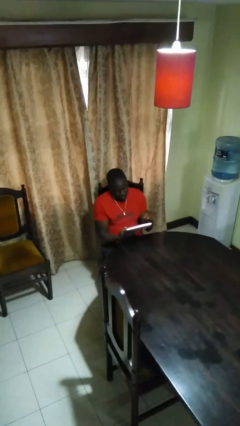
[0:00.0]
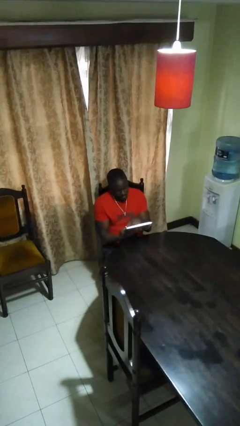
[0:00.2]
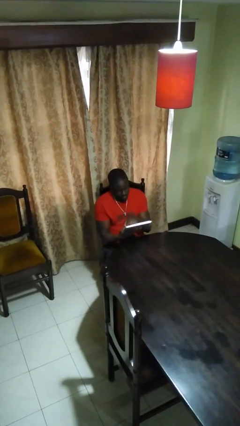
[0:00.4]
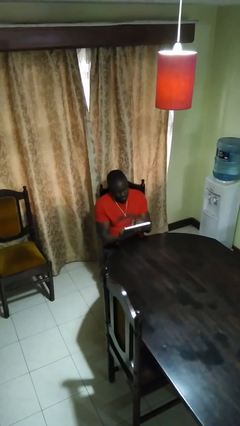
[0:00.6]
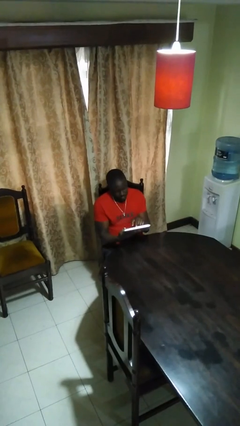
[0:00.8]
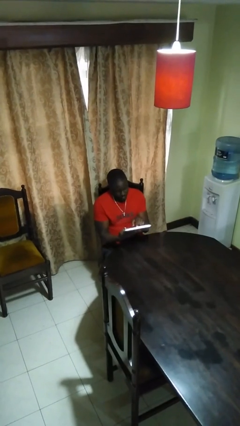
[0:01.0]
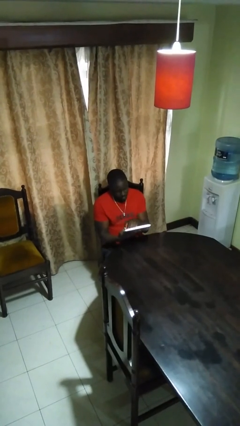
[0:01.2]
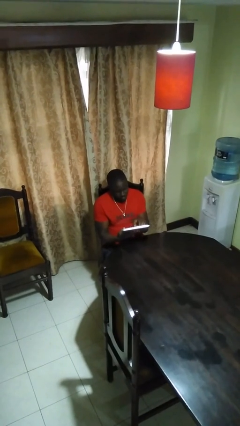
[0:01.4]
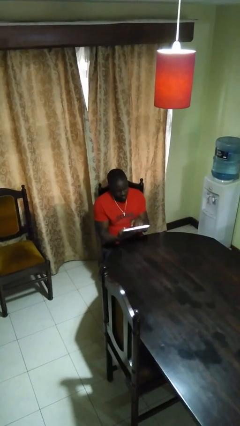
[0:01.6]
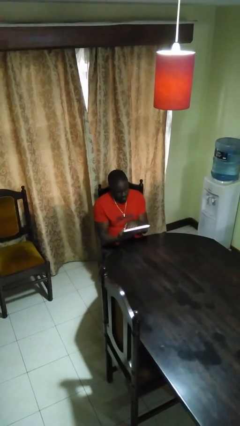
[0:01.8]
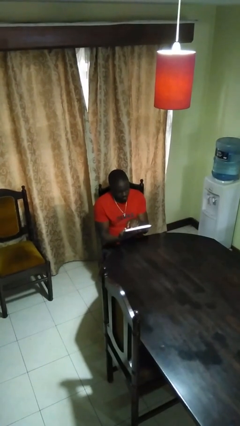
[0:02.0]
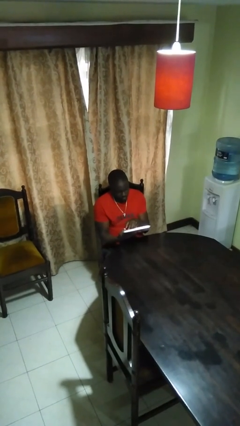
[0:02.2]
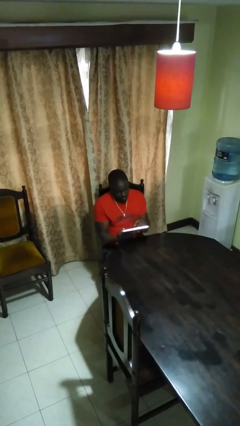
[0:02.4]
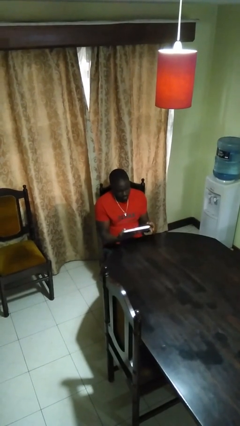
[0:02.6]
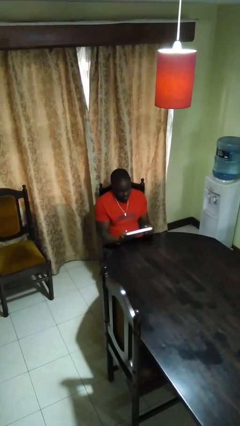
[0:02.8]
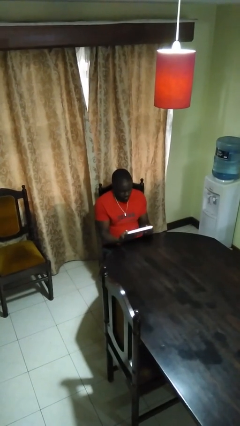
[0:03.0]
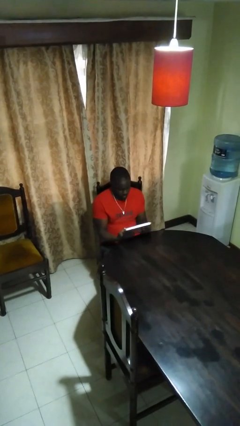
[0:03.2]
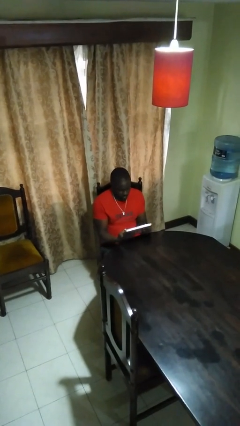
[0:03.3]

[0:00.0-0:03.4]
person interacts with tablet

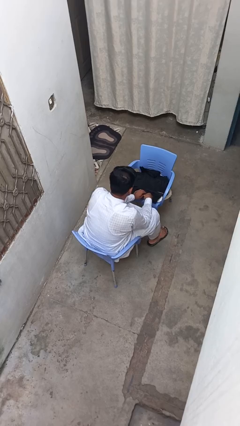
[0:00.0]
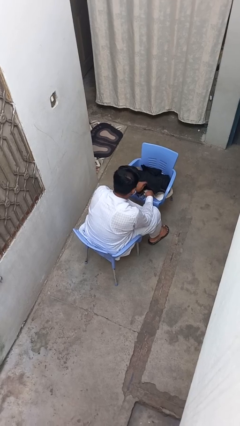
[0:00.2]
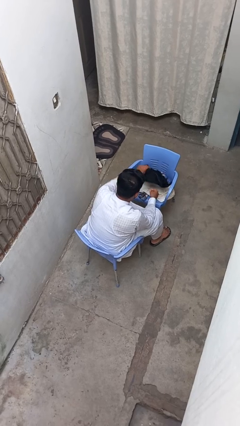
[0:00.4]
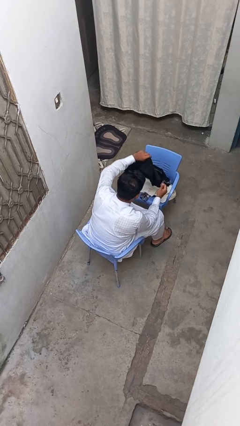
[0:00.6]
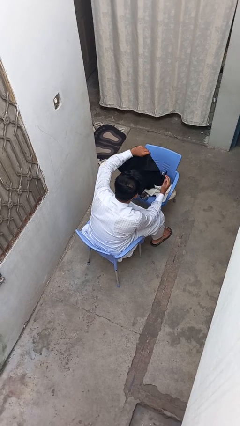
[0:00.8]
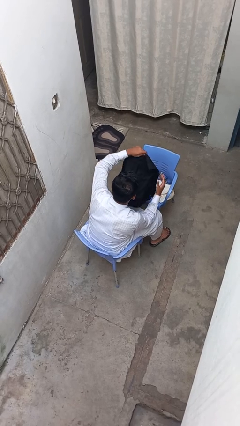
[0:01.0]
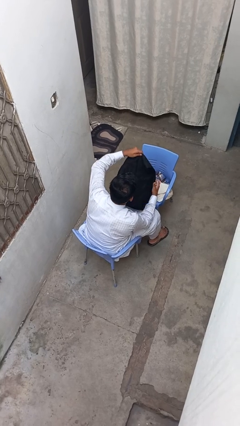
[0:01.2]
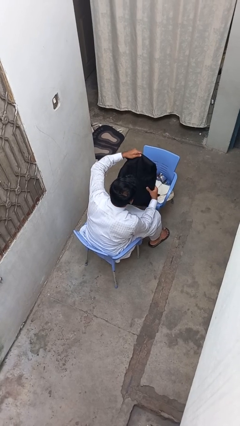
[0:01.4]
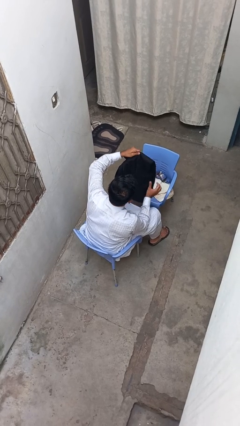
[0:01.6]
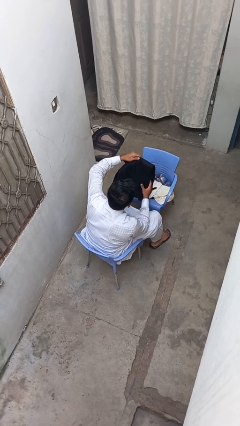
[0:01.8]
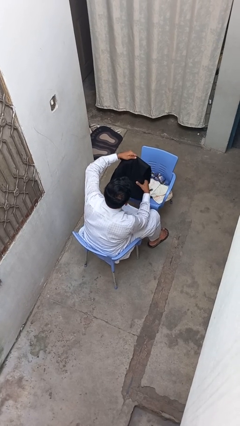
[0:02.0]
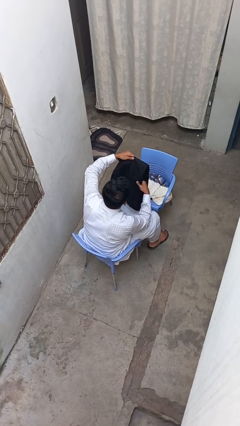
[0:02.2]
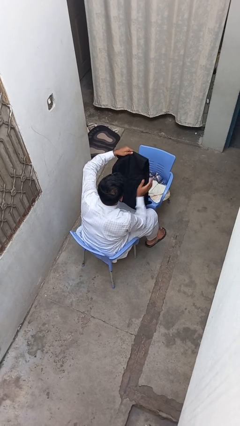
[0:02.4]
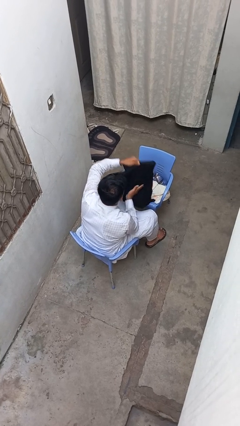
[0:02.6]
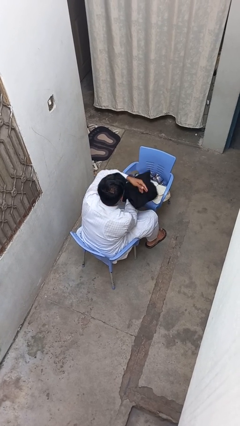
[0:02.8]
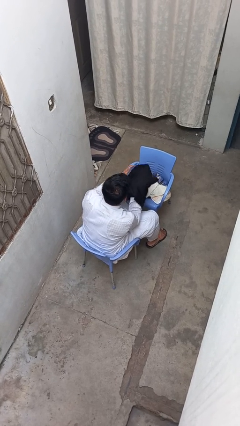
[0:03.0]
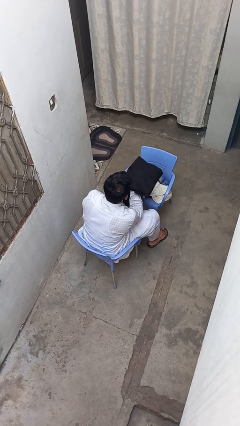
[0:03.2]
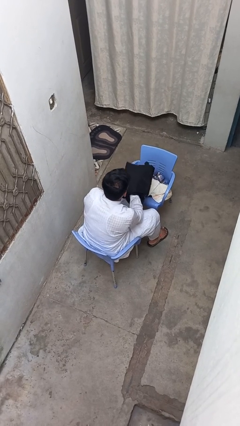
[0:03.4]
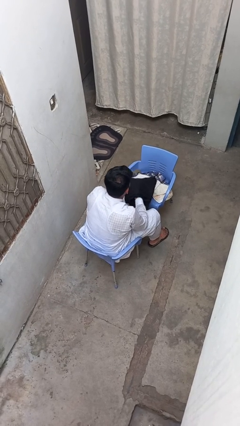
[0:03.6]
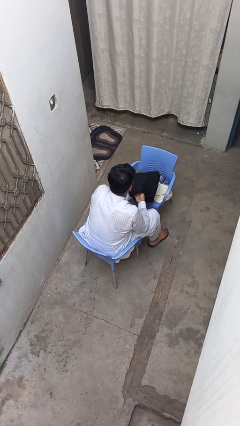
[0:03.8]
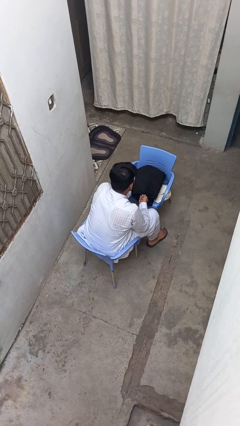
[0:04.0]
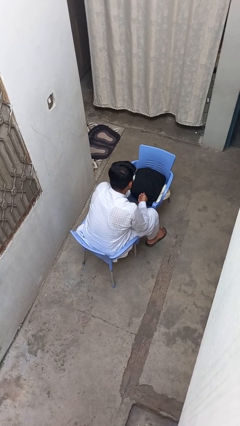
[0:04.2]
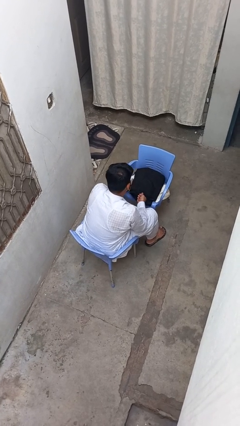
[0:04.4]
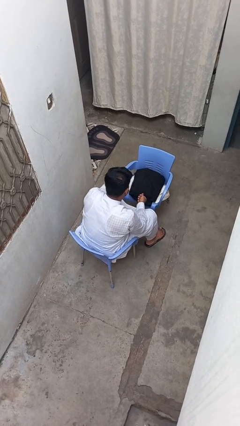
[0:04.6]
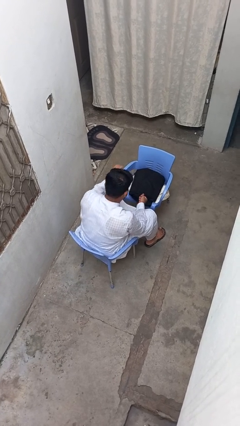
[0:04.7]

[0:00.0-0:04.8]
person folds pants

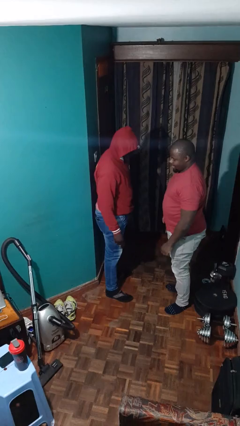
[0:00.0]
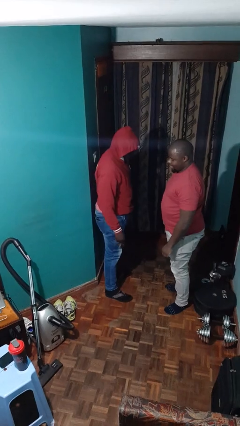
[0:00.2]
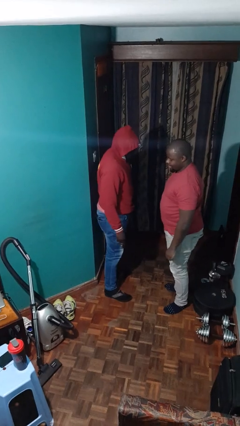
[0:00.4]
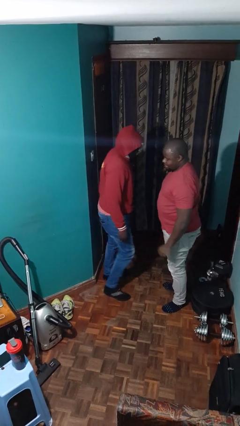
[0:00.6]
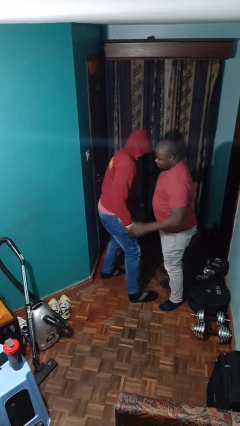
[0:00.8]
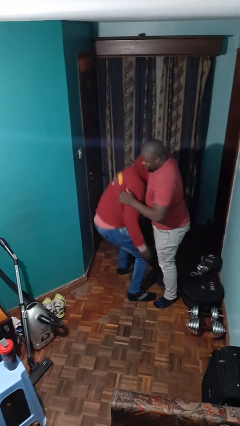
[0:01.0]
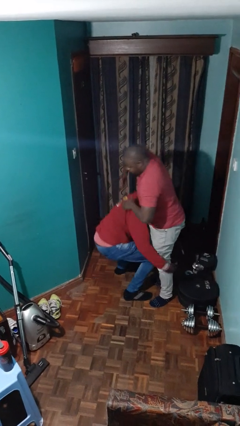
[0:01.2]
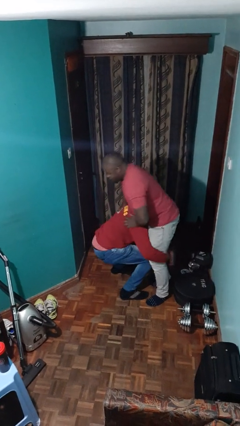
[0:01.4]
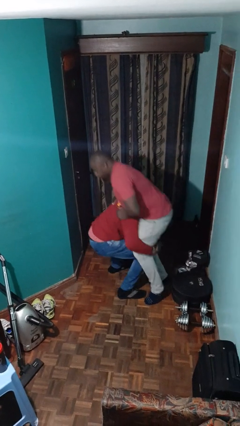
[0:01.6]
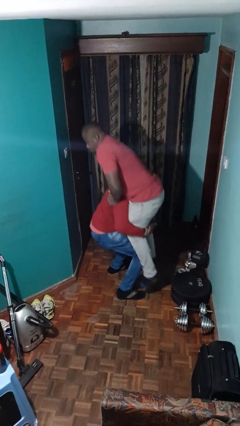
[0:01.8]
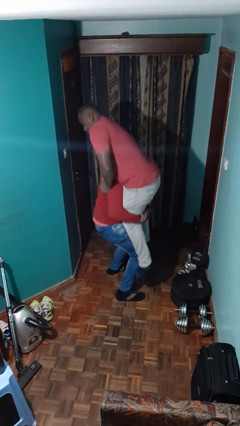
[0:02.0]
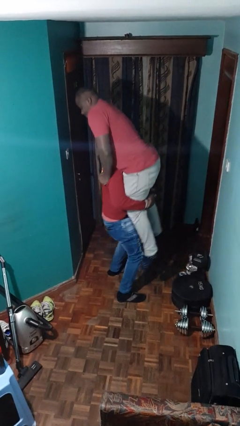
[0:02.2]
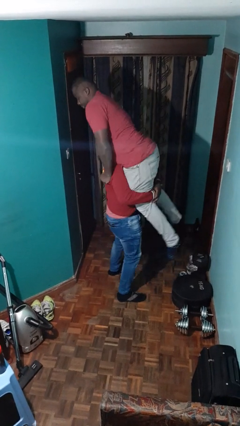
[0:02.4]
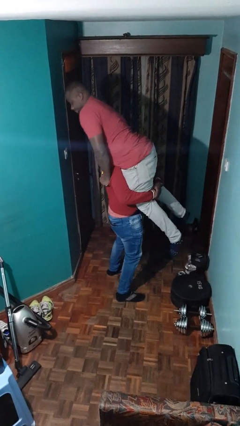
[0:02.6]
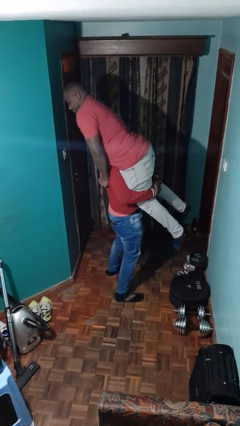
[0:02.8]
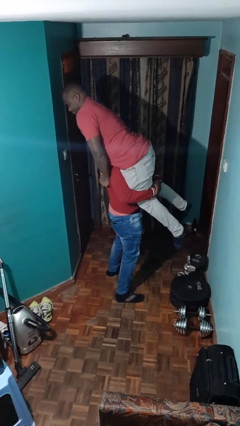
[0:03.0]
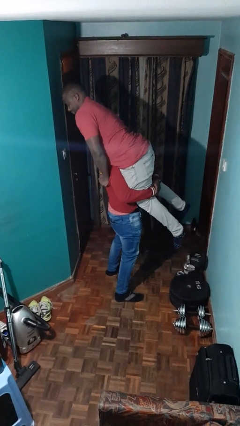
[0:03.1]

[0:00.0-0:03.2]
person picks up person

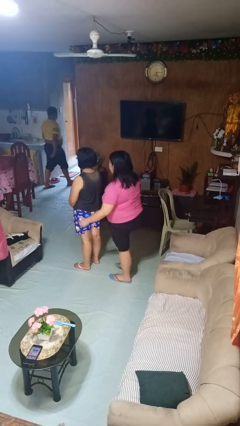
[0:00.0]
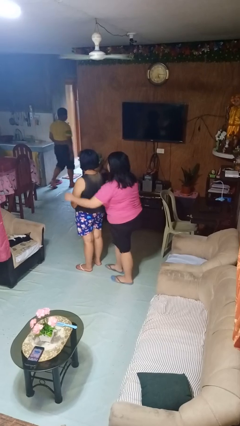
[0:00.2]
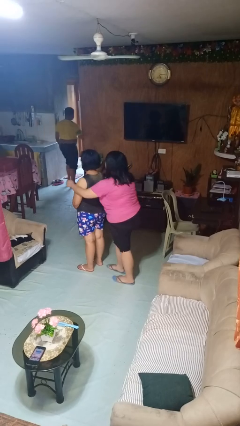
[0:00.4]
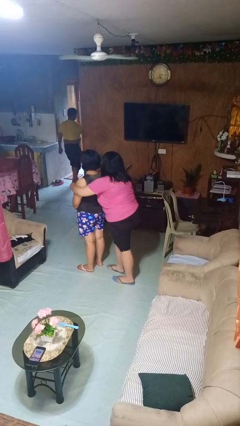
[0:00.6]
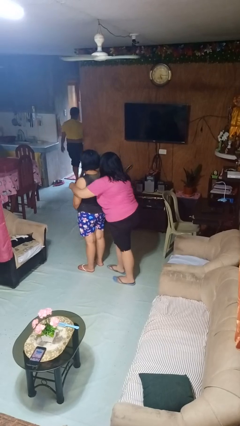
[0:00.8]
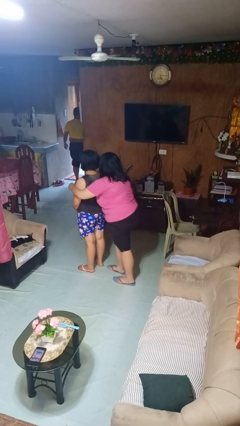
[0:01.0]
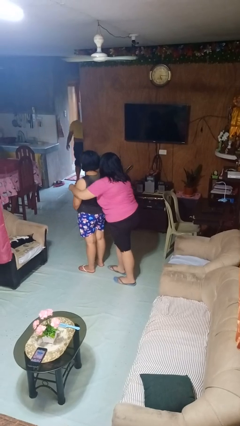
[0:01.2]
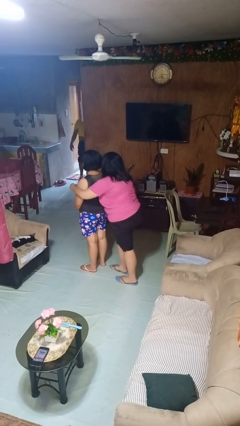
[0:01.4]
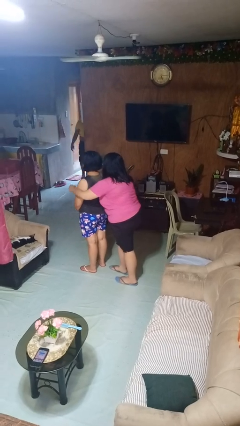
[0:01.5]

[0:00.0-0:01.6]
person hugs person from behind

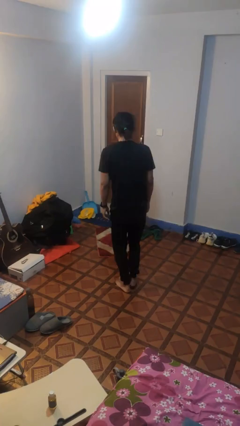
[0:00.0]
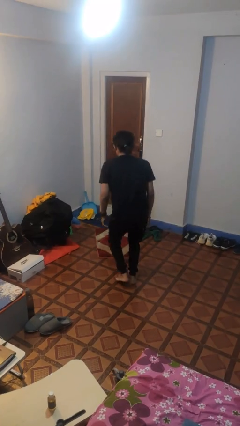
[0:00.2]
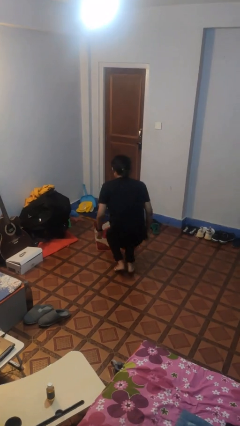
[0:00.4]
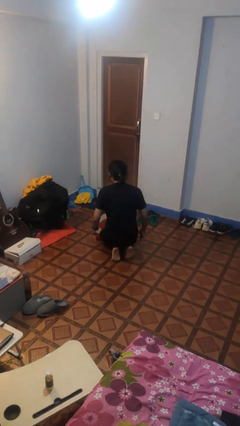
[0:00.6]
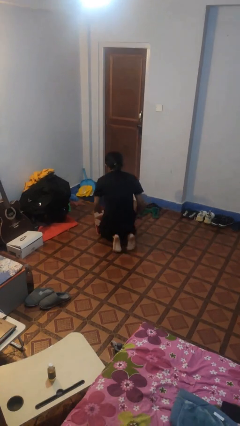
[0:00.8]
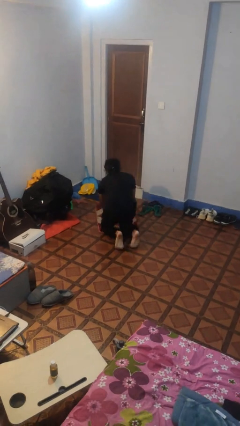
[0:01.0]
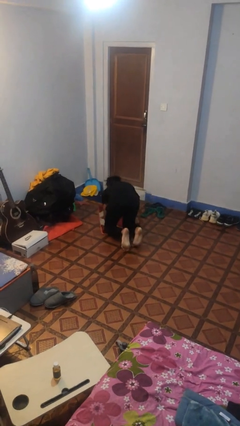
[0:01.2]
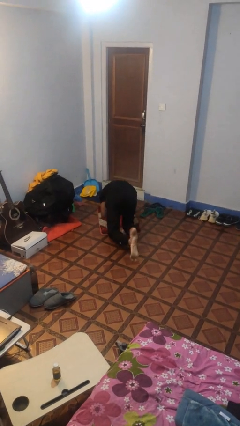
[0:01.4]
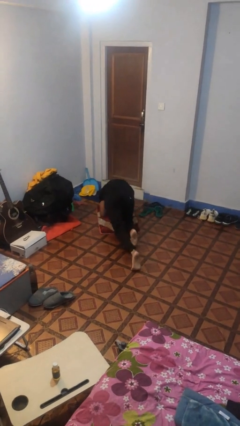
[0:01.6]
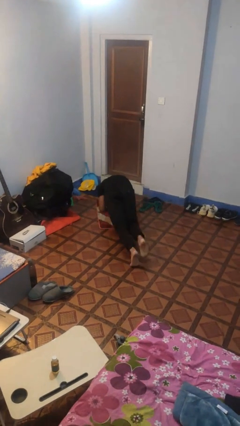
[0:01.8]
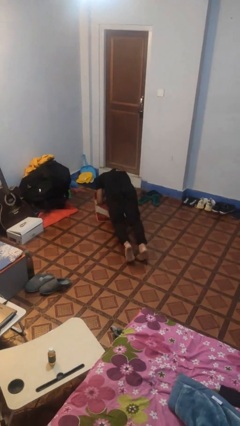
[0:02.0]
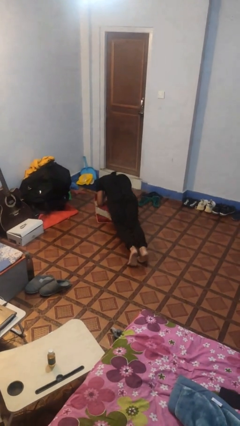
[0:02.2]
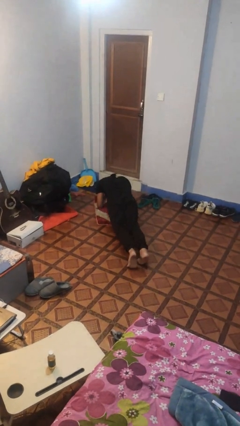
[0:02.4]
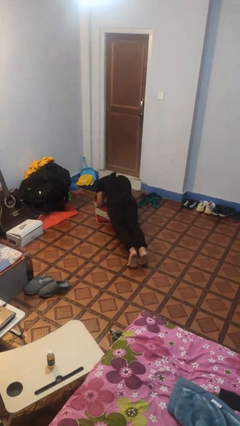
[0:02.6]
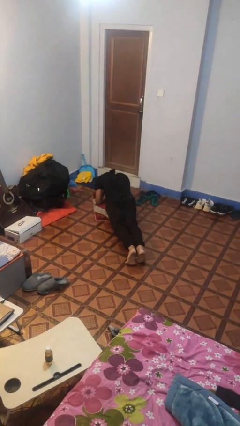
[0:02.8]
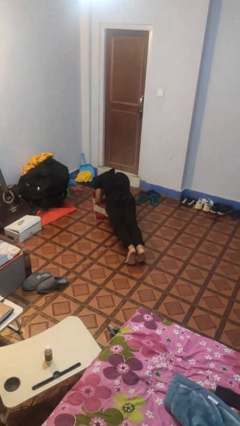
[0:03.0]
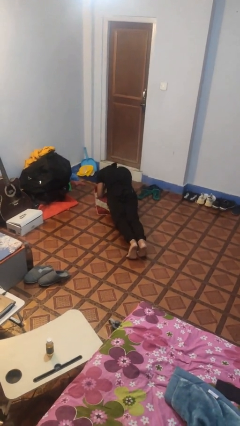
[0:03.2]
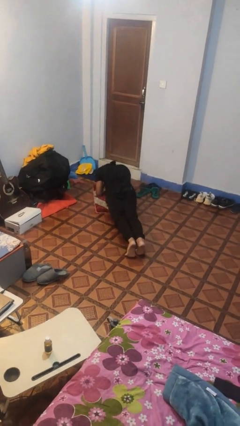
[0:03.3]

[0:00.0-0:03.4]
person exercises with plank

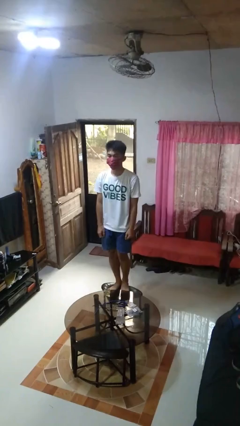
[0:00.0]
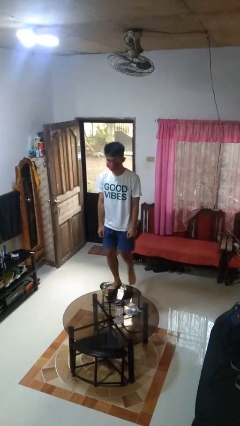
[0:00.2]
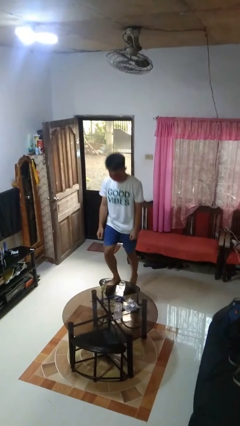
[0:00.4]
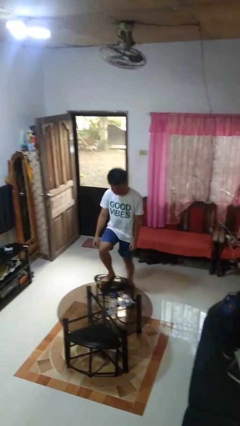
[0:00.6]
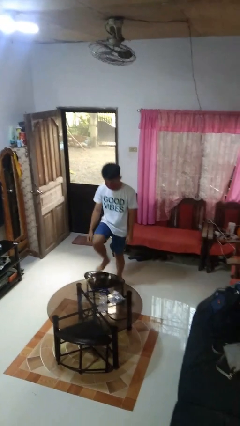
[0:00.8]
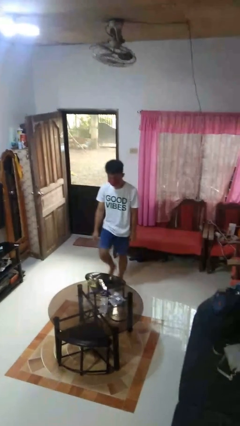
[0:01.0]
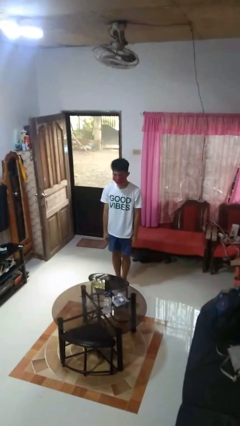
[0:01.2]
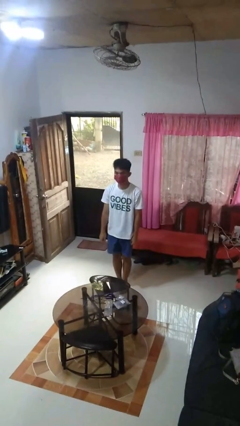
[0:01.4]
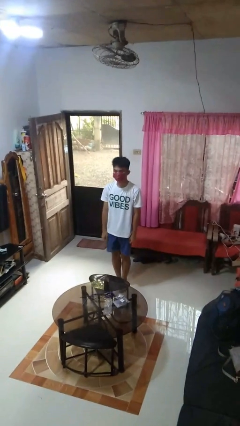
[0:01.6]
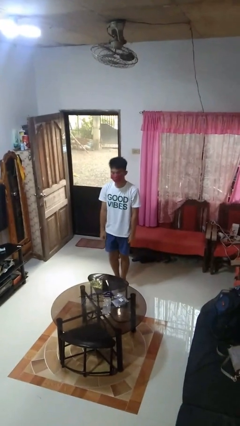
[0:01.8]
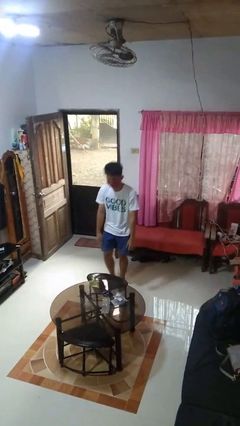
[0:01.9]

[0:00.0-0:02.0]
person climbs off chair
